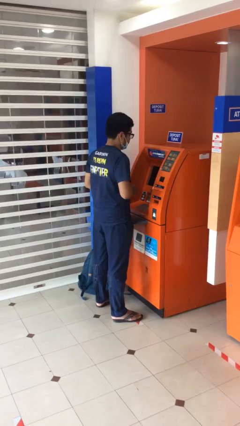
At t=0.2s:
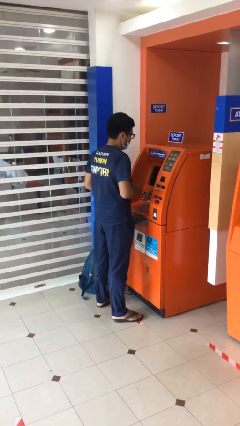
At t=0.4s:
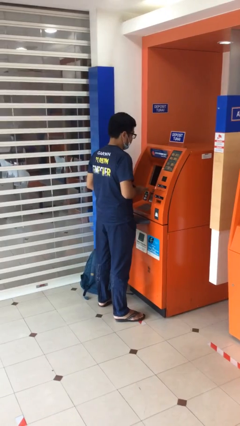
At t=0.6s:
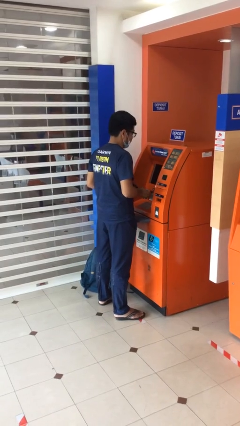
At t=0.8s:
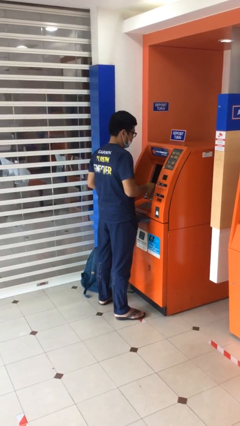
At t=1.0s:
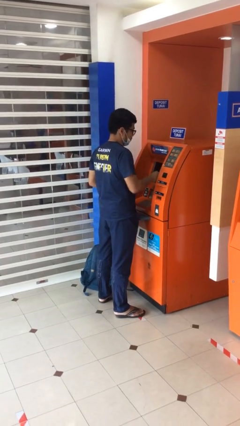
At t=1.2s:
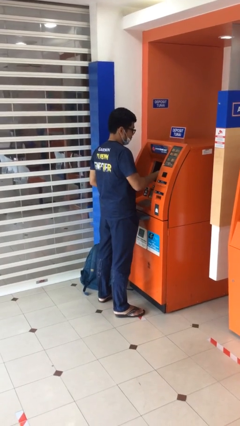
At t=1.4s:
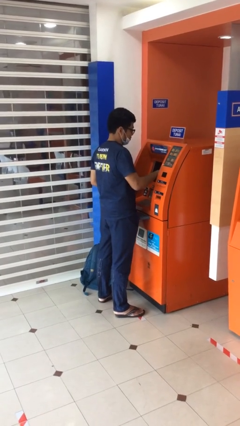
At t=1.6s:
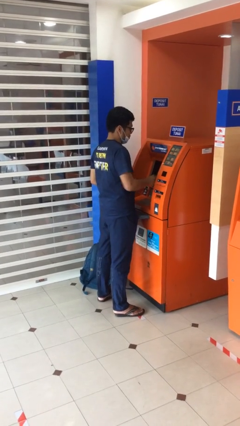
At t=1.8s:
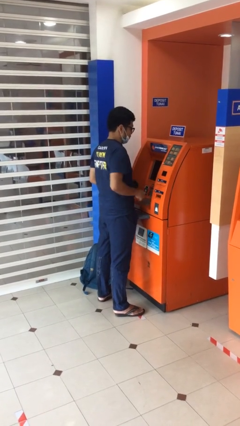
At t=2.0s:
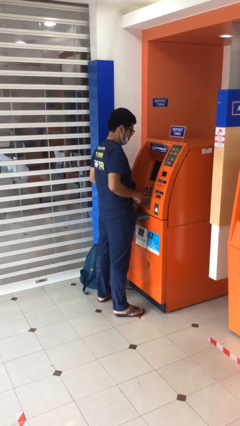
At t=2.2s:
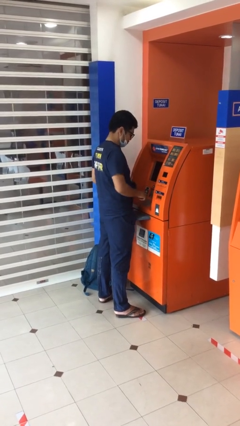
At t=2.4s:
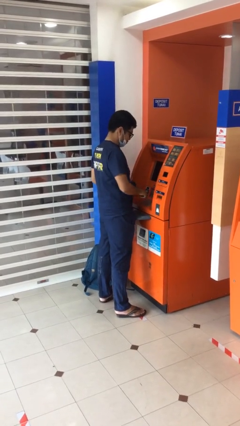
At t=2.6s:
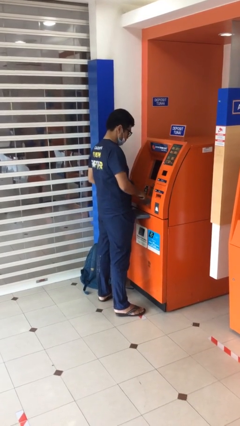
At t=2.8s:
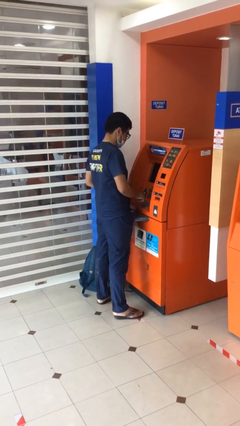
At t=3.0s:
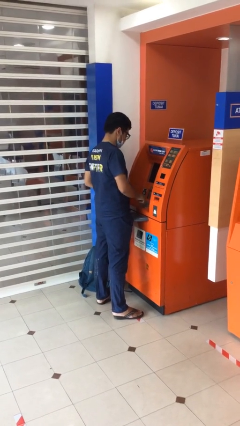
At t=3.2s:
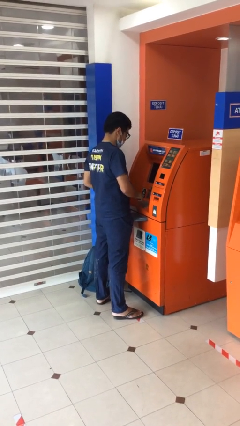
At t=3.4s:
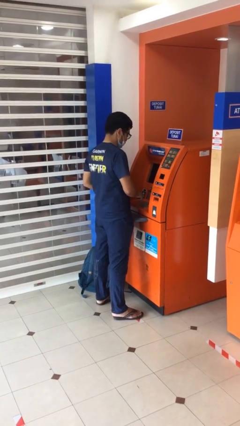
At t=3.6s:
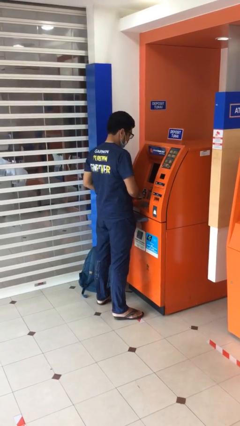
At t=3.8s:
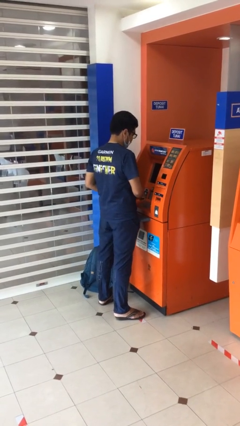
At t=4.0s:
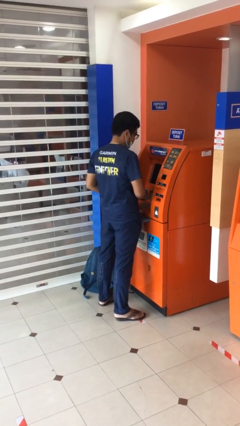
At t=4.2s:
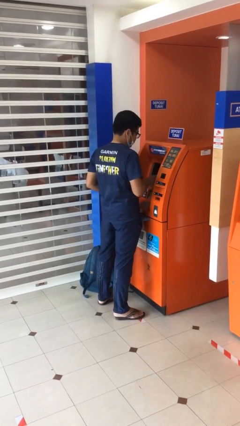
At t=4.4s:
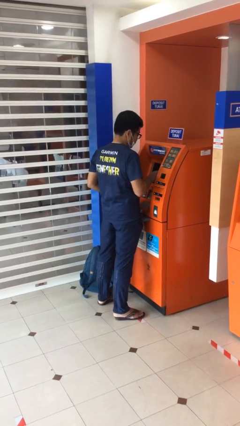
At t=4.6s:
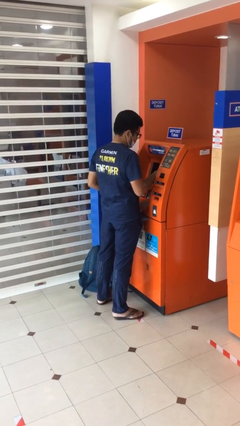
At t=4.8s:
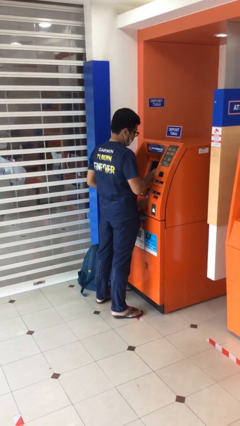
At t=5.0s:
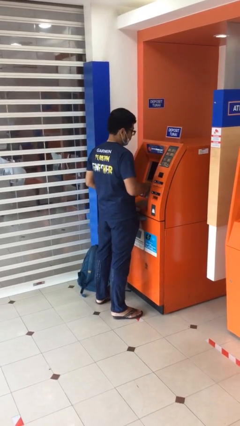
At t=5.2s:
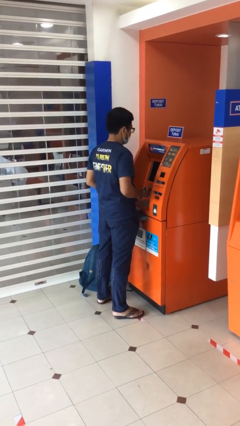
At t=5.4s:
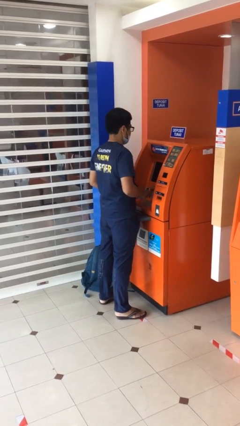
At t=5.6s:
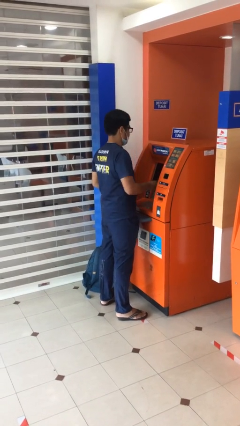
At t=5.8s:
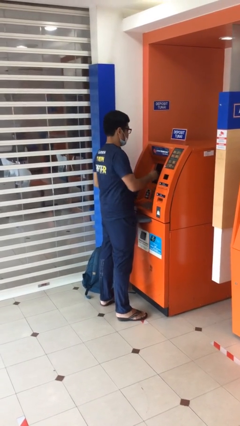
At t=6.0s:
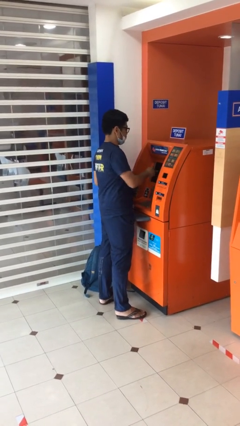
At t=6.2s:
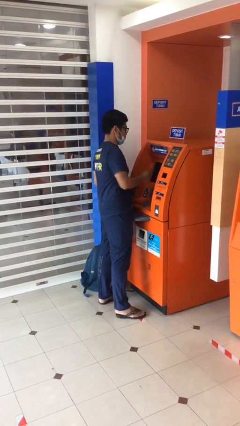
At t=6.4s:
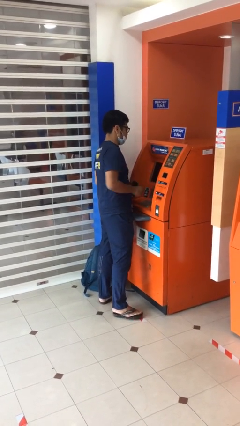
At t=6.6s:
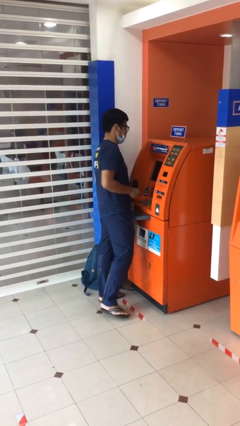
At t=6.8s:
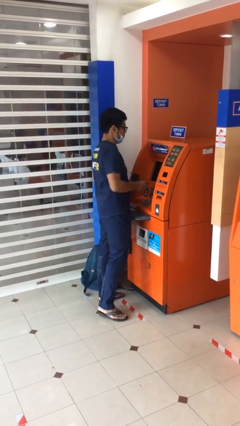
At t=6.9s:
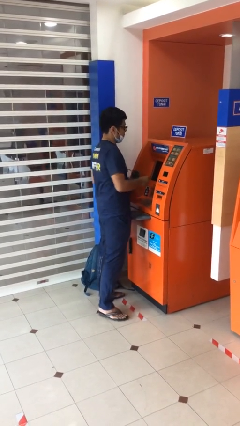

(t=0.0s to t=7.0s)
person purchases from machine

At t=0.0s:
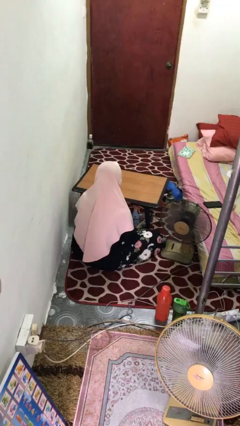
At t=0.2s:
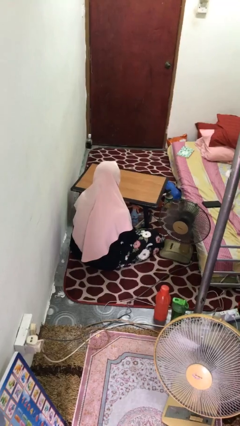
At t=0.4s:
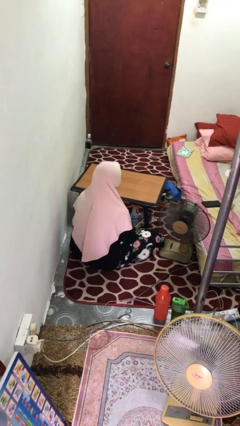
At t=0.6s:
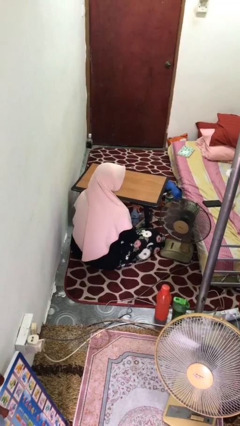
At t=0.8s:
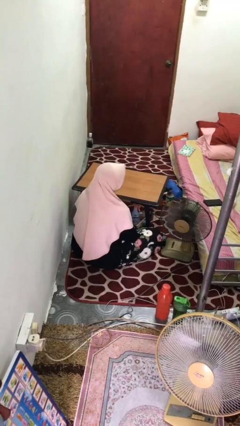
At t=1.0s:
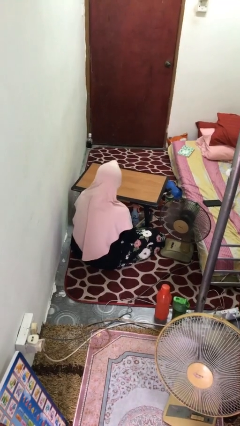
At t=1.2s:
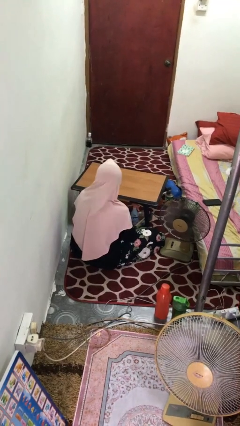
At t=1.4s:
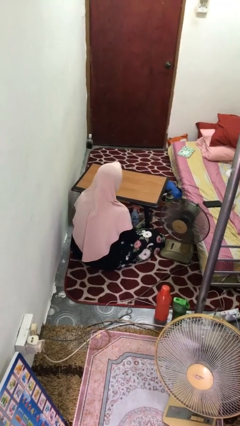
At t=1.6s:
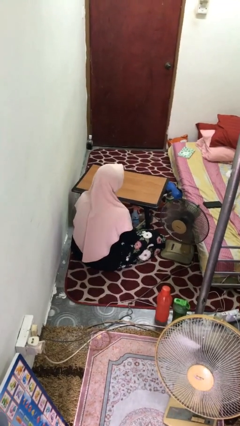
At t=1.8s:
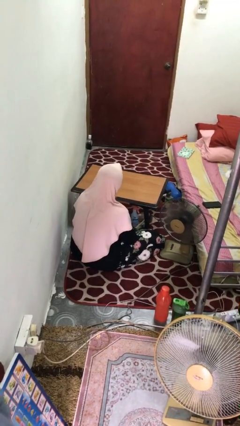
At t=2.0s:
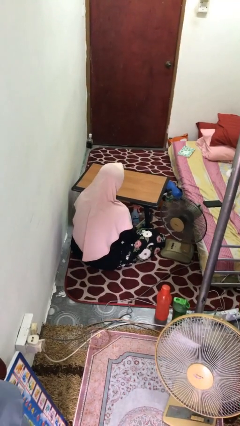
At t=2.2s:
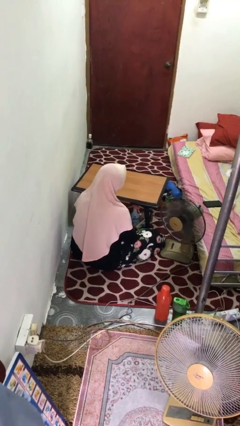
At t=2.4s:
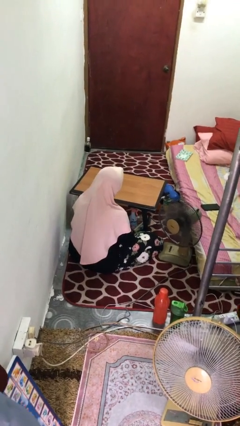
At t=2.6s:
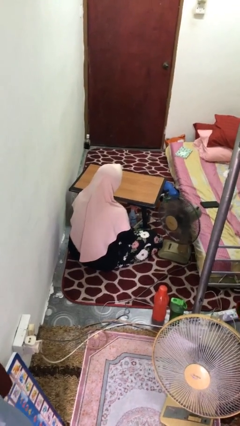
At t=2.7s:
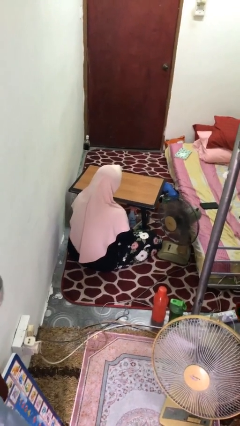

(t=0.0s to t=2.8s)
person shakes head

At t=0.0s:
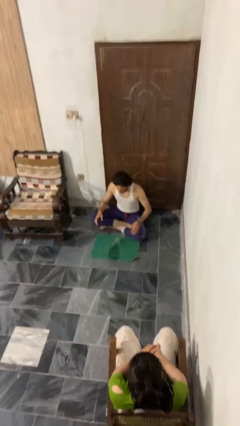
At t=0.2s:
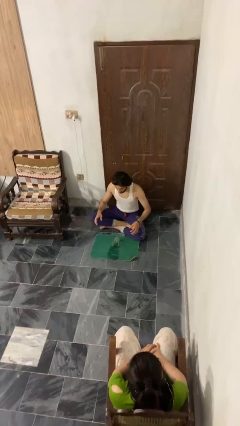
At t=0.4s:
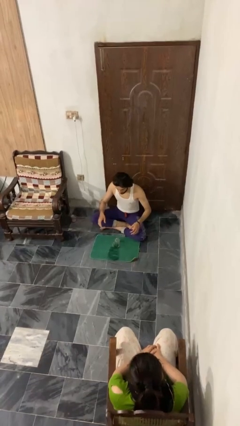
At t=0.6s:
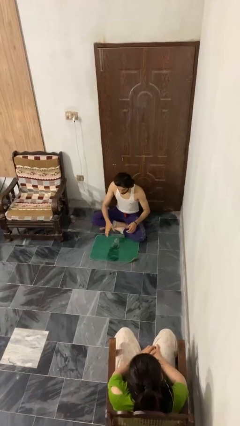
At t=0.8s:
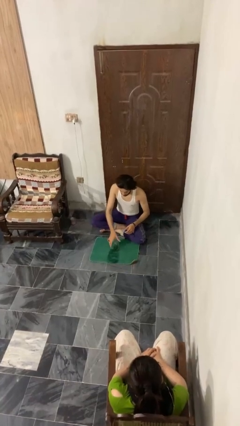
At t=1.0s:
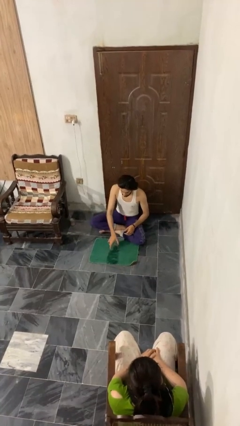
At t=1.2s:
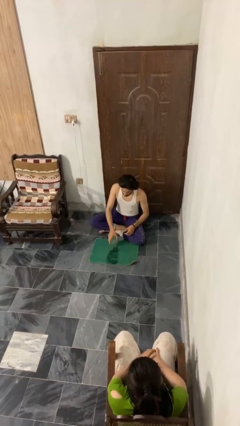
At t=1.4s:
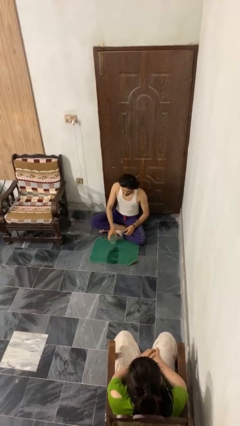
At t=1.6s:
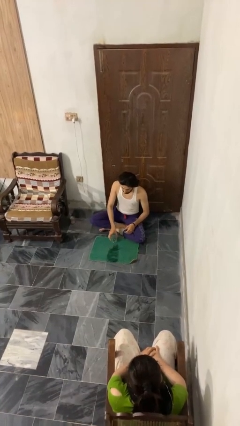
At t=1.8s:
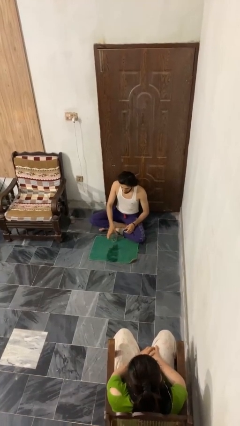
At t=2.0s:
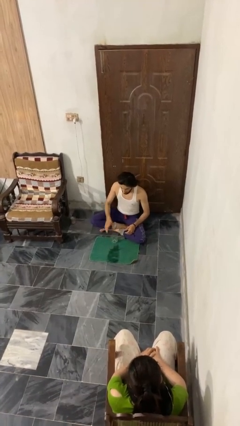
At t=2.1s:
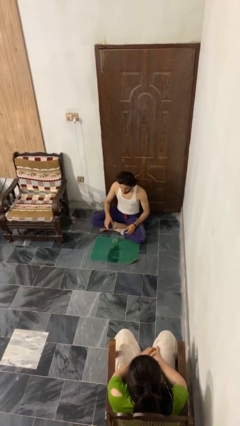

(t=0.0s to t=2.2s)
person sets upright glass

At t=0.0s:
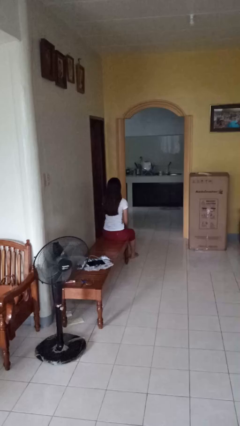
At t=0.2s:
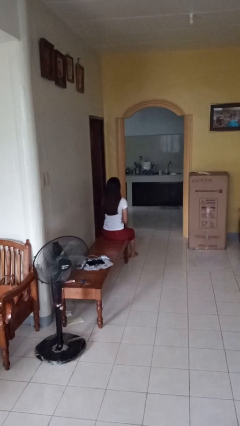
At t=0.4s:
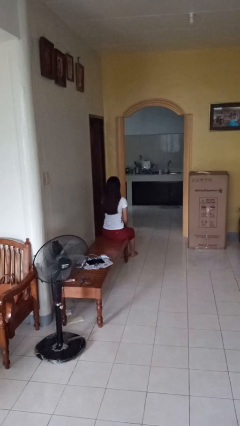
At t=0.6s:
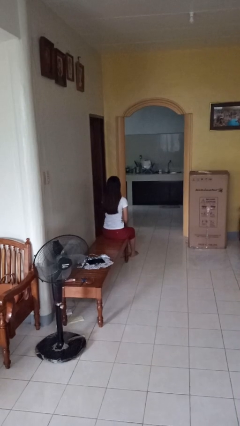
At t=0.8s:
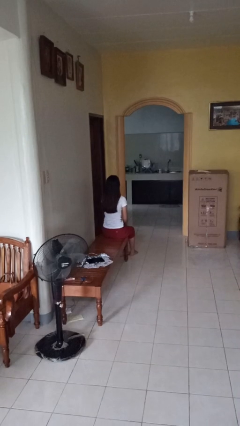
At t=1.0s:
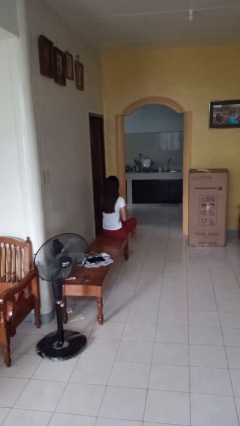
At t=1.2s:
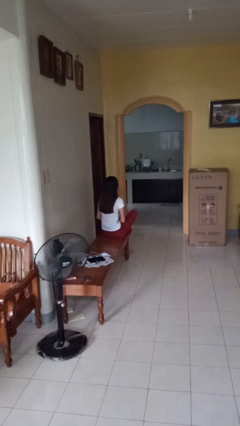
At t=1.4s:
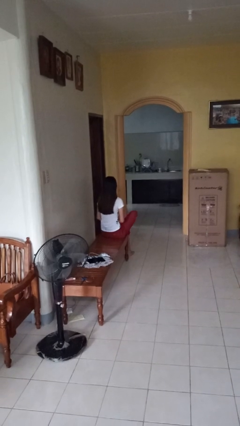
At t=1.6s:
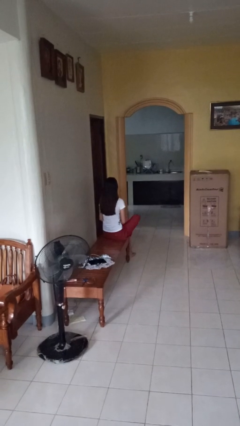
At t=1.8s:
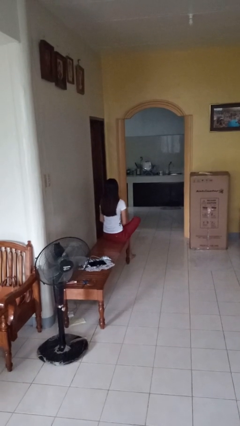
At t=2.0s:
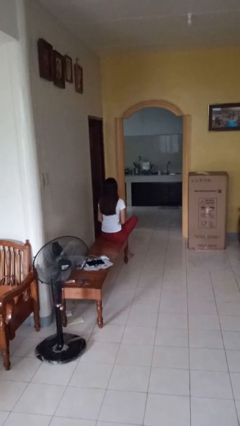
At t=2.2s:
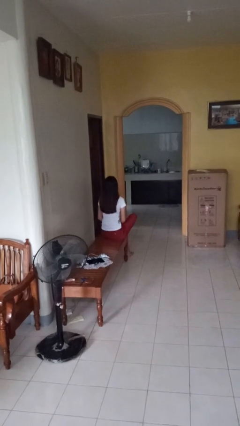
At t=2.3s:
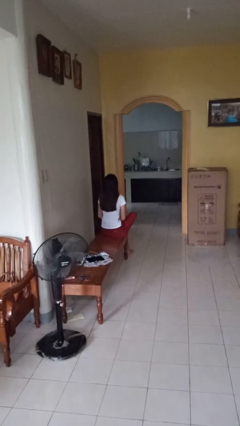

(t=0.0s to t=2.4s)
person crosses legs

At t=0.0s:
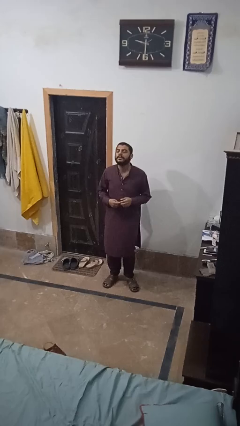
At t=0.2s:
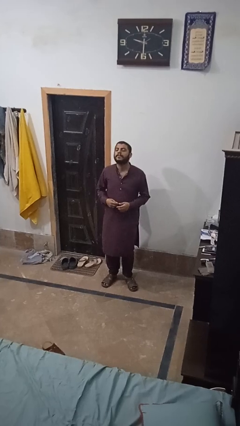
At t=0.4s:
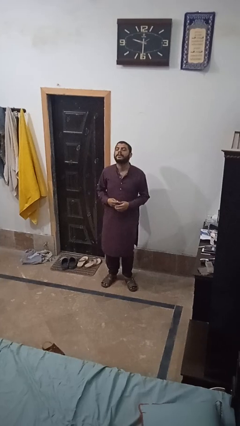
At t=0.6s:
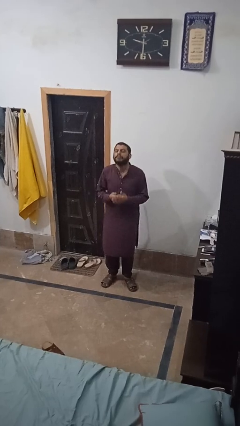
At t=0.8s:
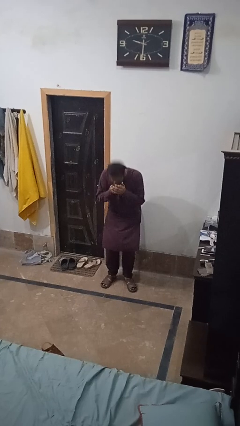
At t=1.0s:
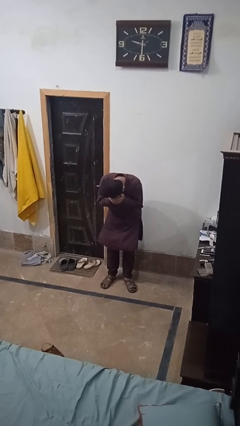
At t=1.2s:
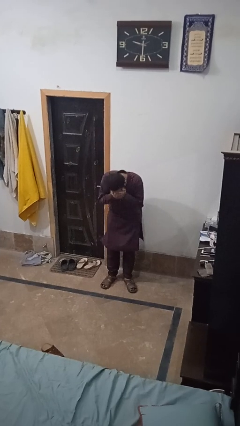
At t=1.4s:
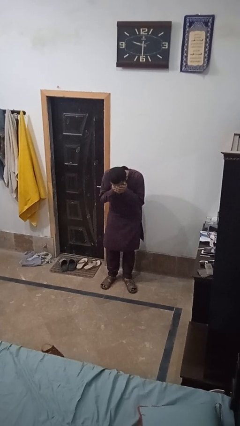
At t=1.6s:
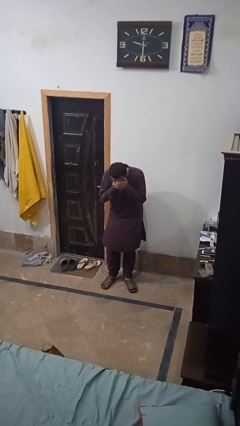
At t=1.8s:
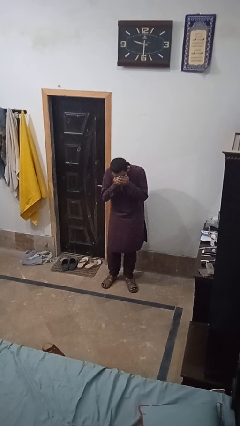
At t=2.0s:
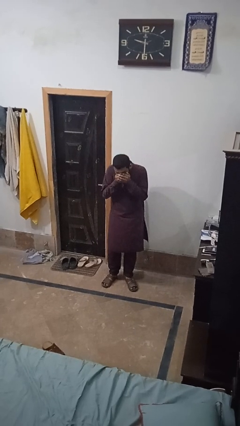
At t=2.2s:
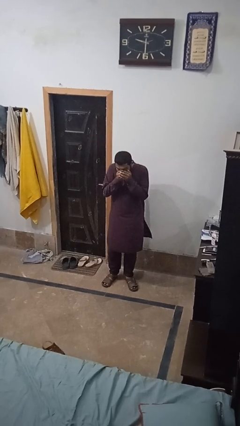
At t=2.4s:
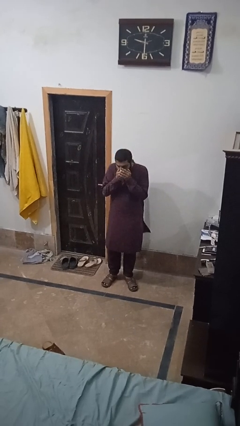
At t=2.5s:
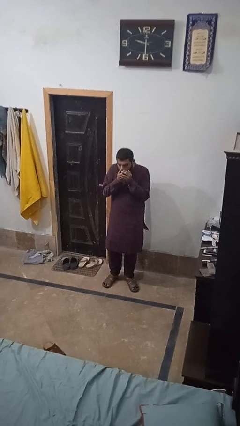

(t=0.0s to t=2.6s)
person sneezes into hand

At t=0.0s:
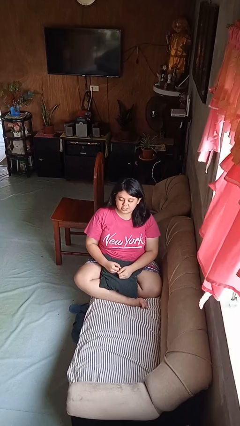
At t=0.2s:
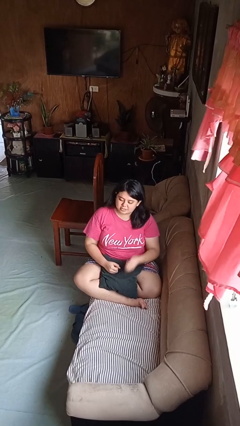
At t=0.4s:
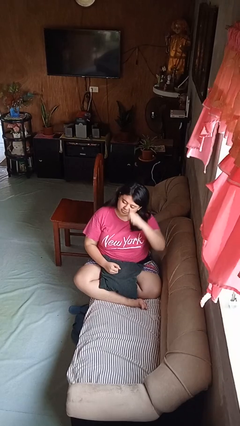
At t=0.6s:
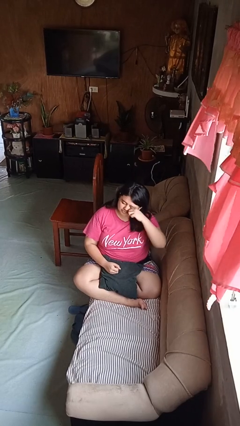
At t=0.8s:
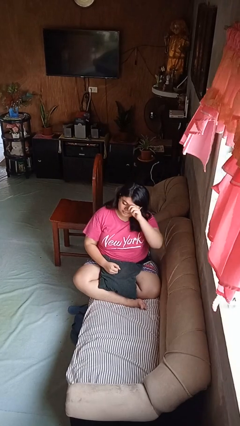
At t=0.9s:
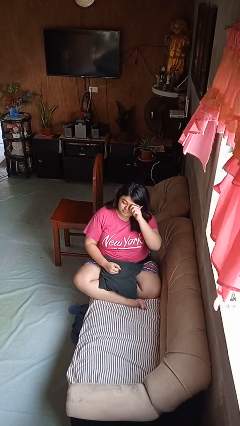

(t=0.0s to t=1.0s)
person rubs eyes
